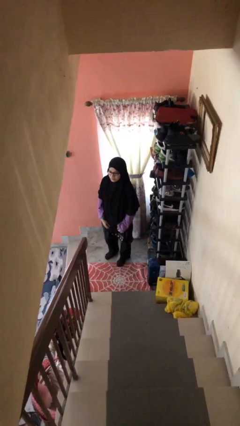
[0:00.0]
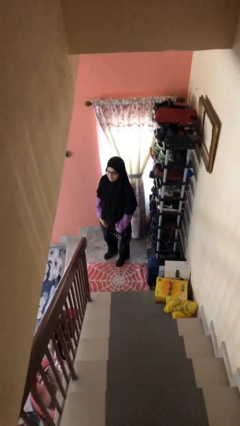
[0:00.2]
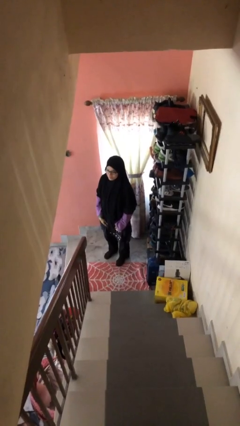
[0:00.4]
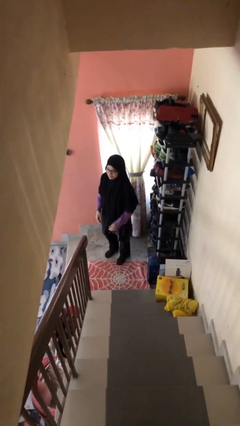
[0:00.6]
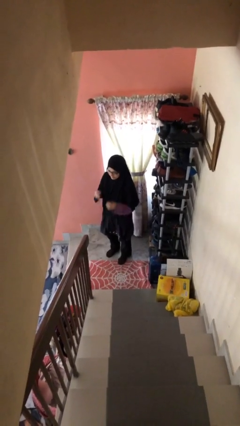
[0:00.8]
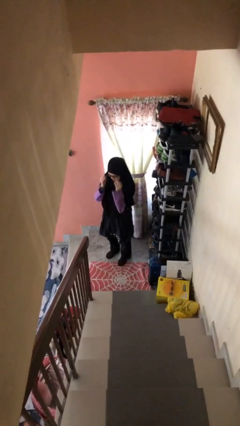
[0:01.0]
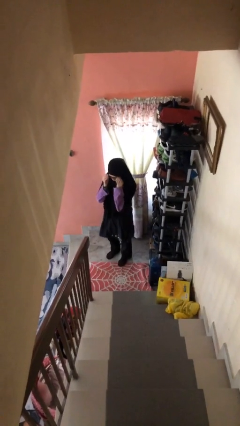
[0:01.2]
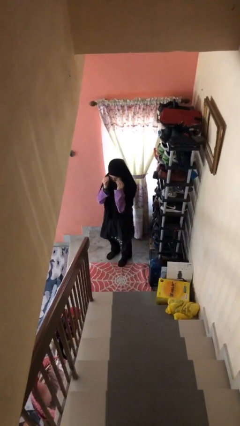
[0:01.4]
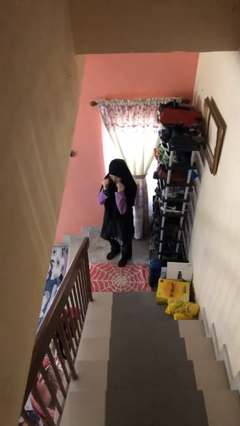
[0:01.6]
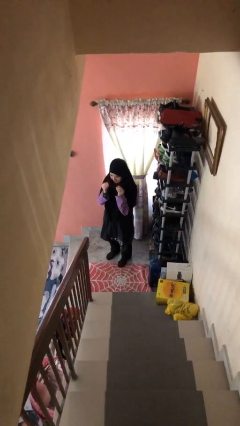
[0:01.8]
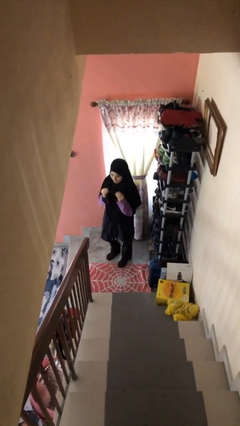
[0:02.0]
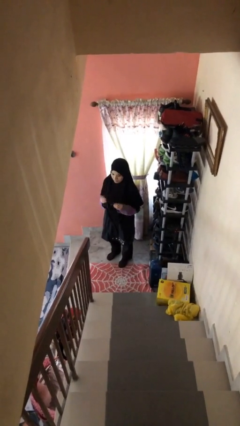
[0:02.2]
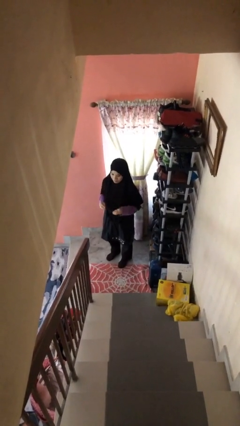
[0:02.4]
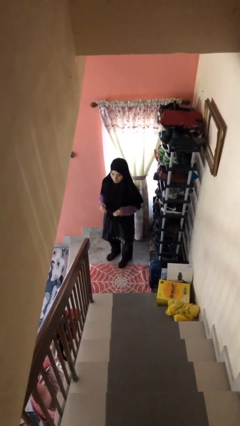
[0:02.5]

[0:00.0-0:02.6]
person takes off glasses

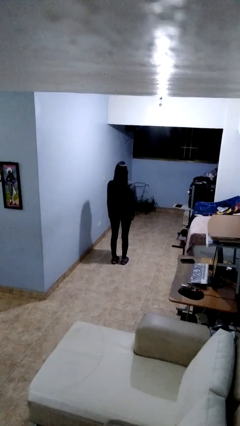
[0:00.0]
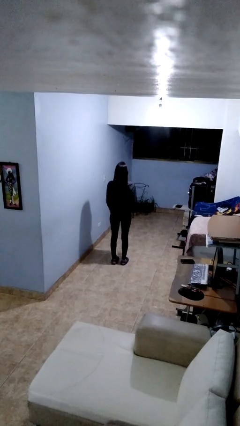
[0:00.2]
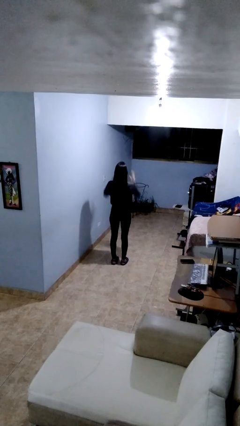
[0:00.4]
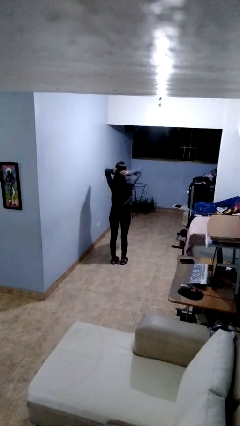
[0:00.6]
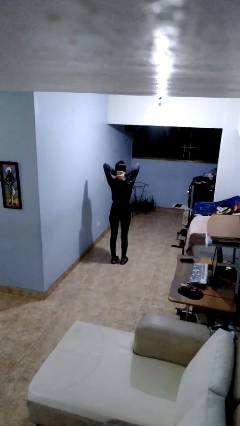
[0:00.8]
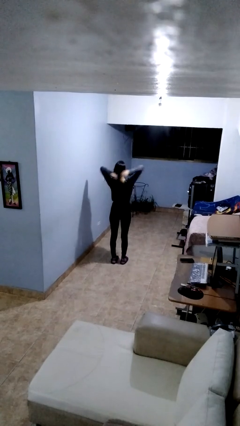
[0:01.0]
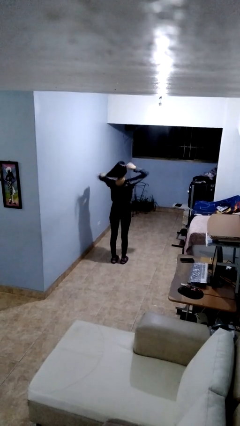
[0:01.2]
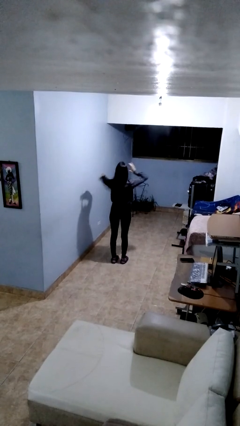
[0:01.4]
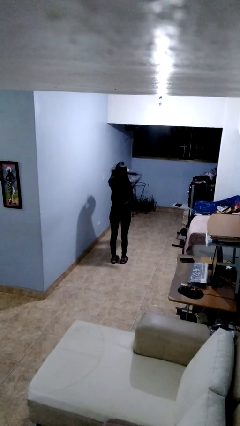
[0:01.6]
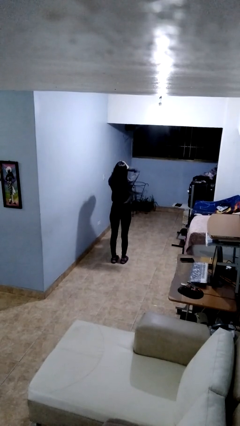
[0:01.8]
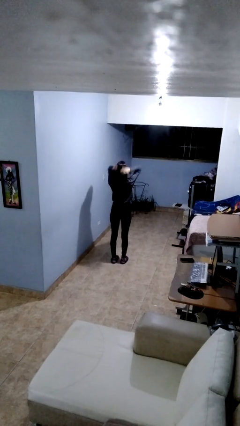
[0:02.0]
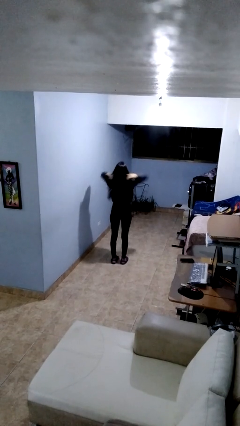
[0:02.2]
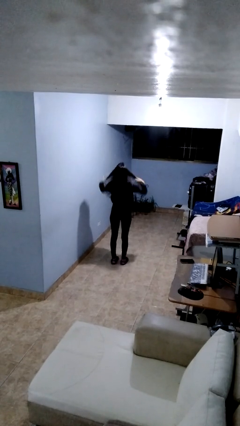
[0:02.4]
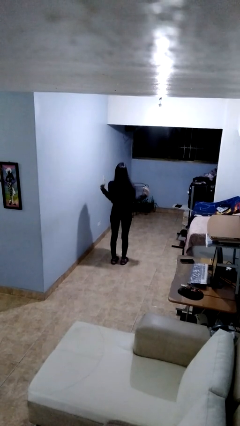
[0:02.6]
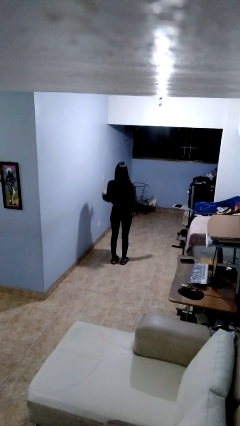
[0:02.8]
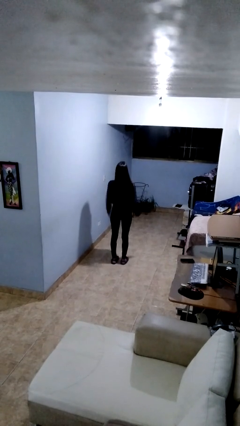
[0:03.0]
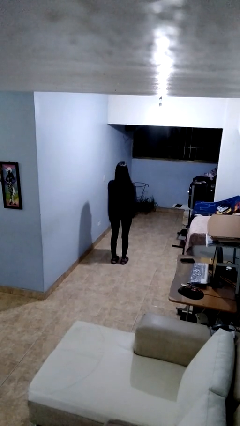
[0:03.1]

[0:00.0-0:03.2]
person strokes hair

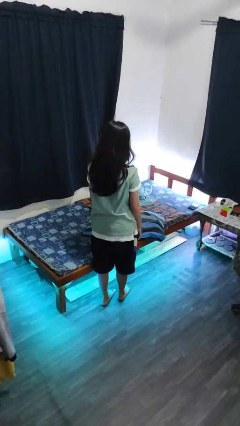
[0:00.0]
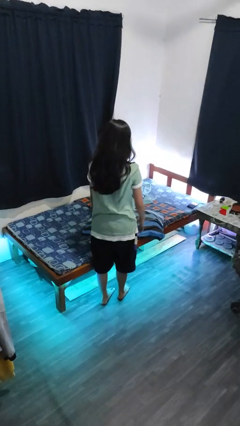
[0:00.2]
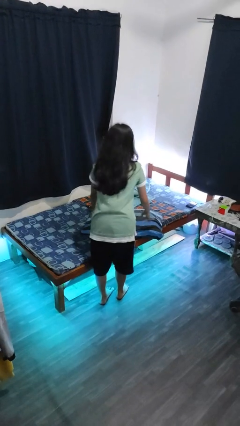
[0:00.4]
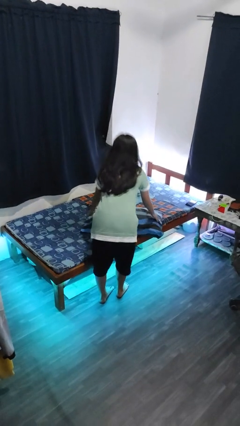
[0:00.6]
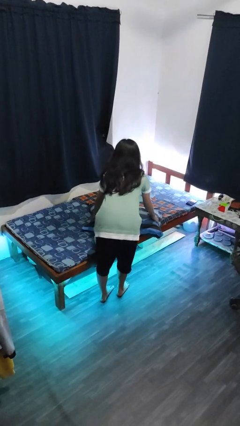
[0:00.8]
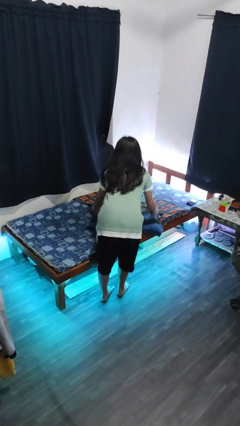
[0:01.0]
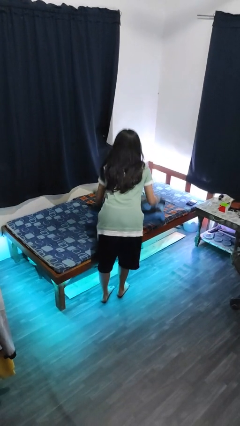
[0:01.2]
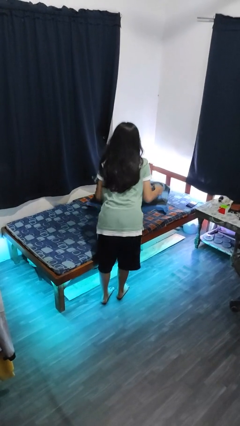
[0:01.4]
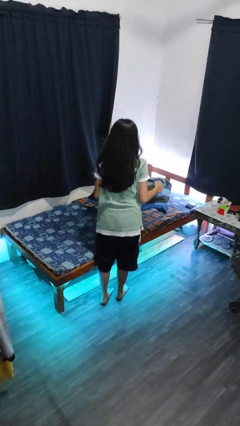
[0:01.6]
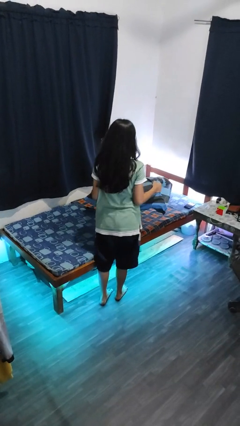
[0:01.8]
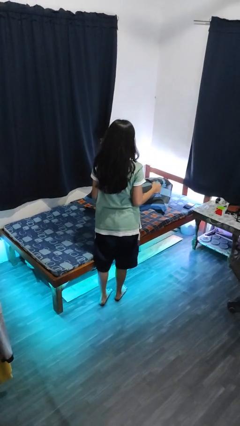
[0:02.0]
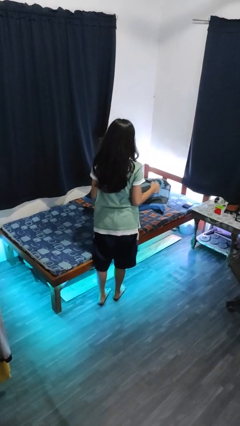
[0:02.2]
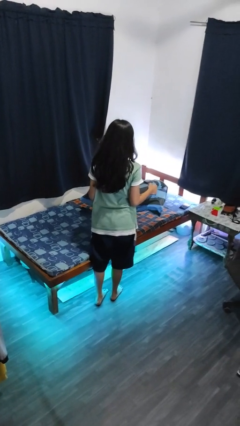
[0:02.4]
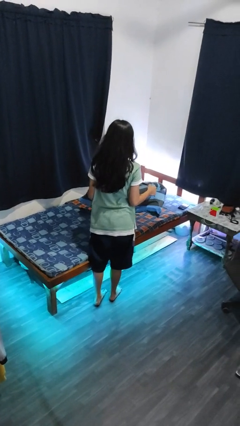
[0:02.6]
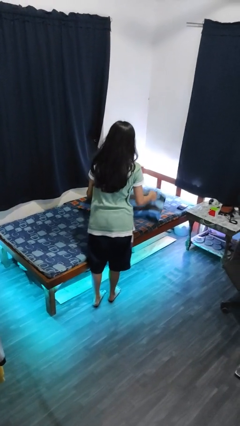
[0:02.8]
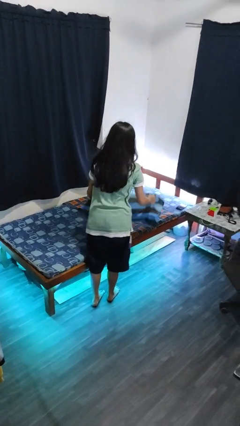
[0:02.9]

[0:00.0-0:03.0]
person picks up object from bed

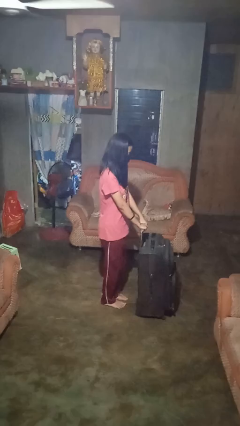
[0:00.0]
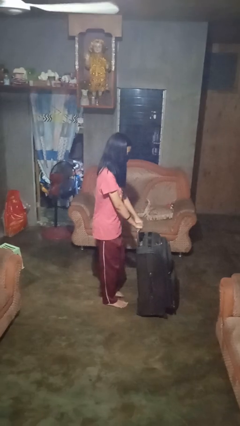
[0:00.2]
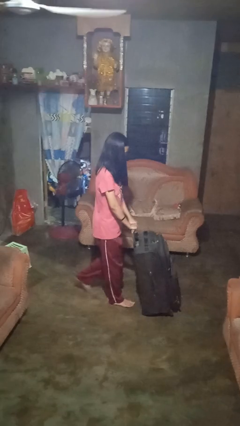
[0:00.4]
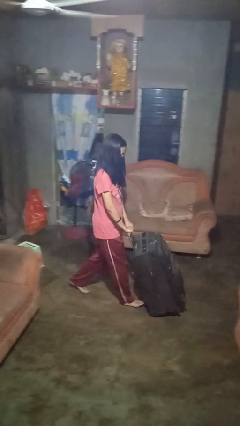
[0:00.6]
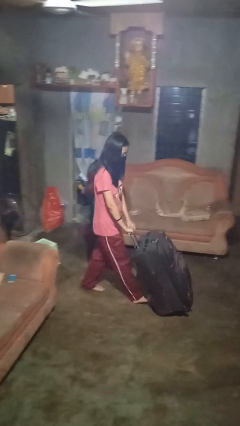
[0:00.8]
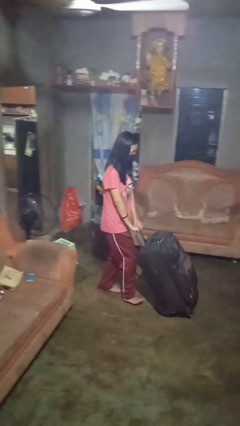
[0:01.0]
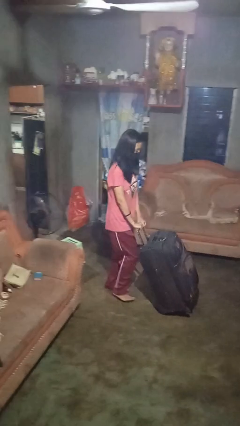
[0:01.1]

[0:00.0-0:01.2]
person pulls wheeled cart

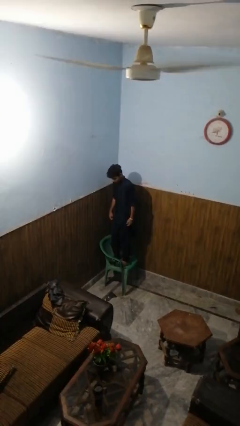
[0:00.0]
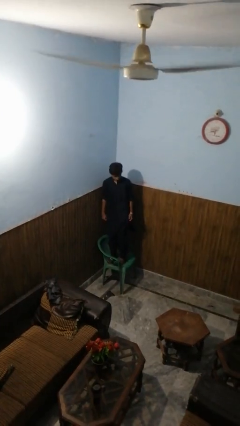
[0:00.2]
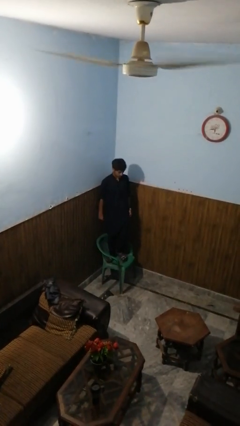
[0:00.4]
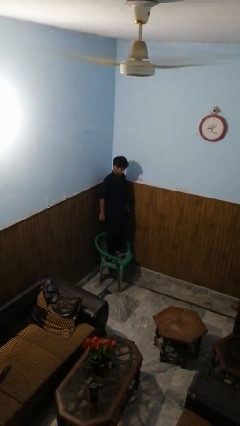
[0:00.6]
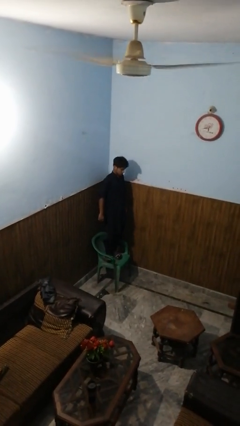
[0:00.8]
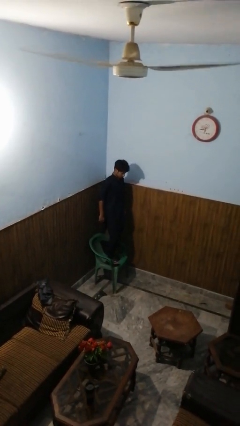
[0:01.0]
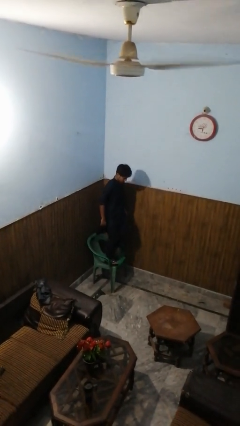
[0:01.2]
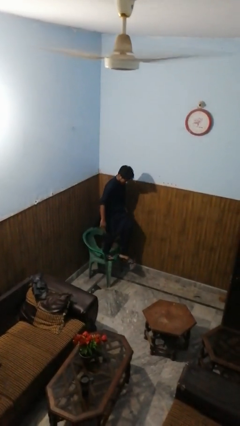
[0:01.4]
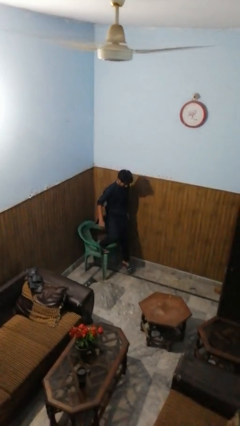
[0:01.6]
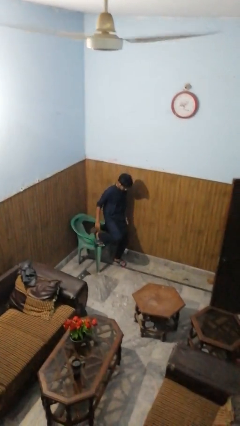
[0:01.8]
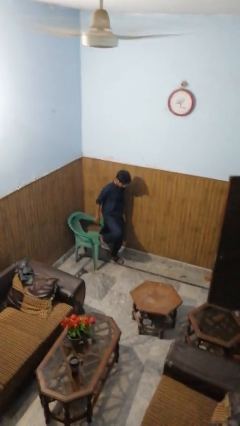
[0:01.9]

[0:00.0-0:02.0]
person climbs off chair

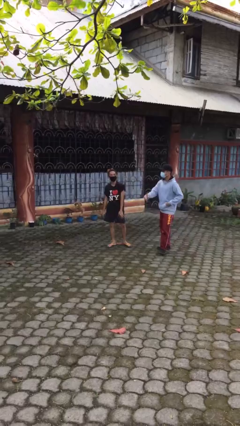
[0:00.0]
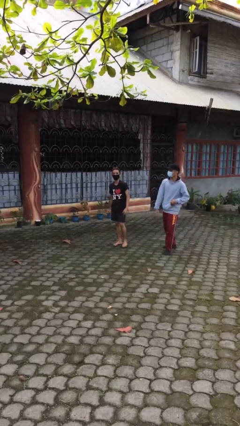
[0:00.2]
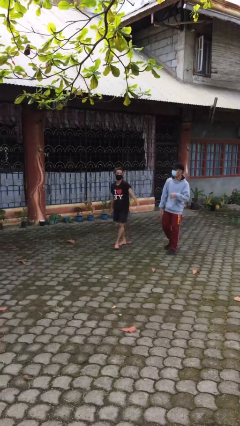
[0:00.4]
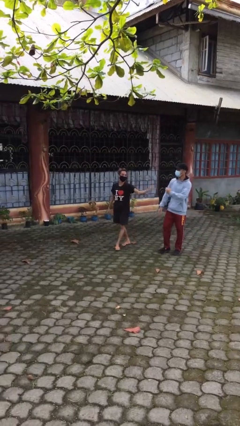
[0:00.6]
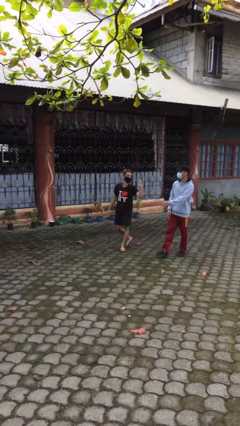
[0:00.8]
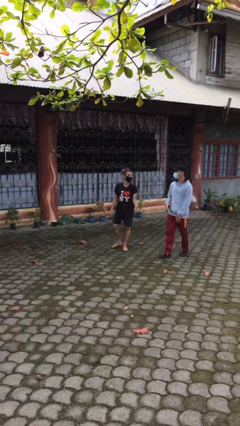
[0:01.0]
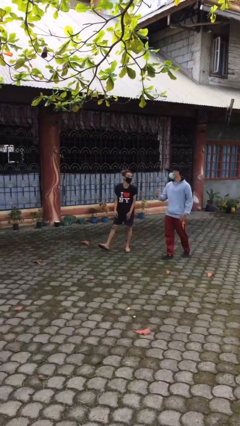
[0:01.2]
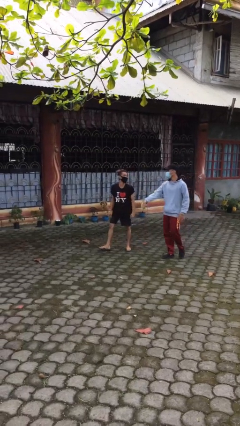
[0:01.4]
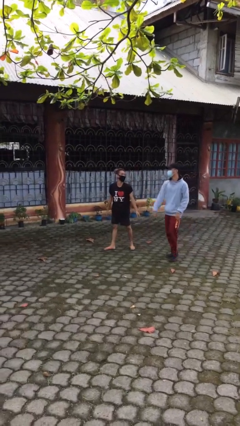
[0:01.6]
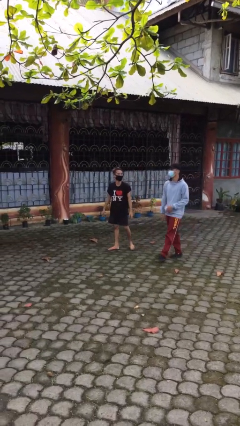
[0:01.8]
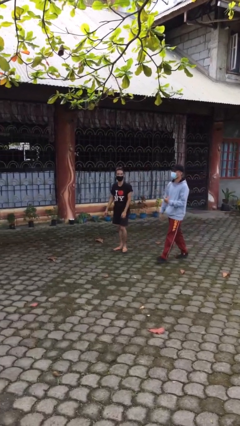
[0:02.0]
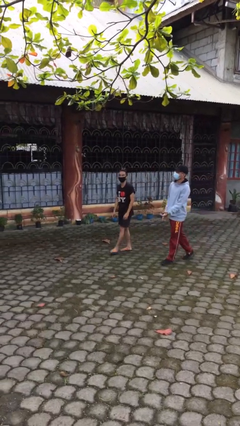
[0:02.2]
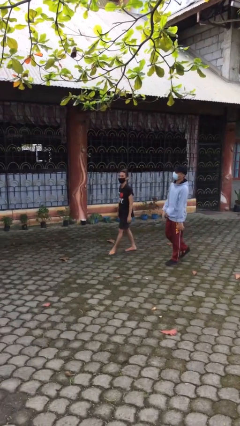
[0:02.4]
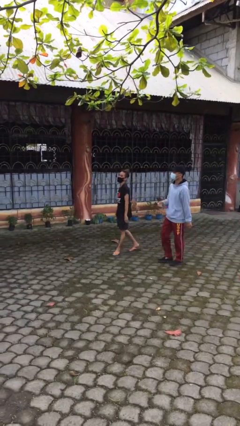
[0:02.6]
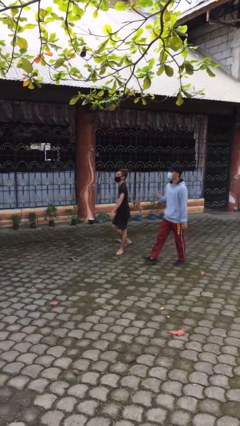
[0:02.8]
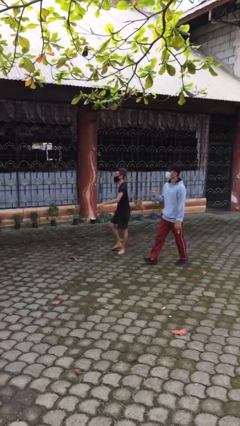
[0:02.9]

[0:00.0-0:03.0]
person talks to person

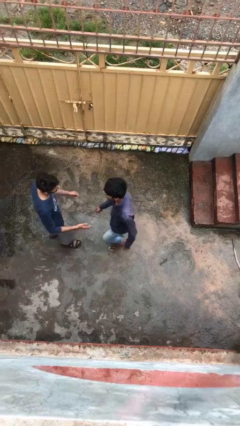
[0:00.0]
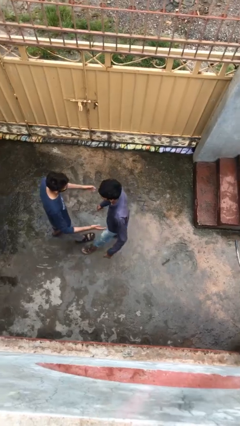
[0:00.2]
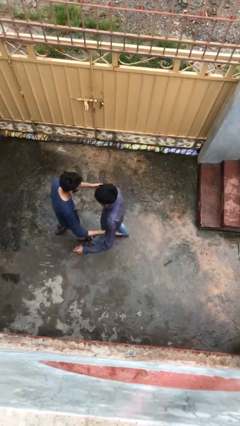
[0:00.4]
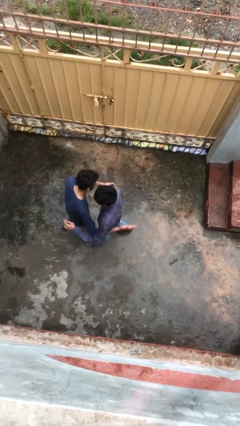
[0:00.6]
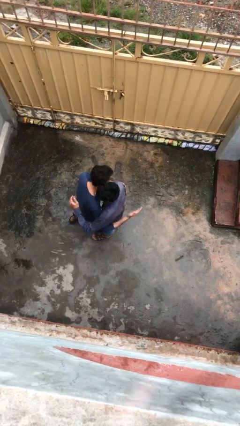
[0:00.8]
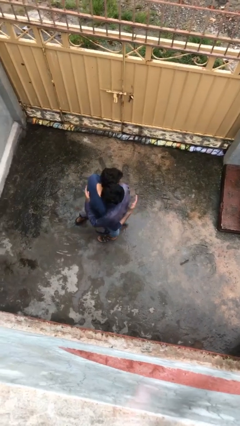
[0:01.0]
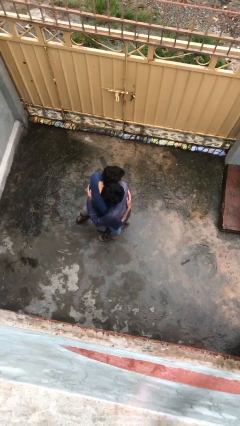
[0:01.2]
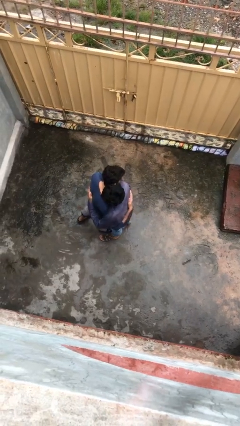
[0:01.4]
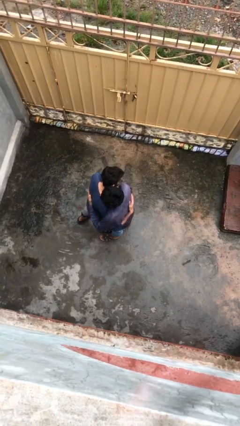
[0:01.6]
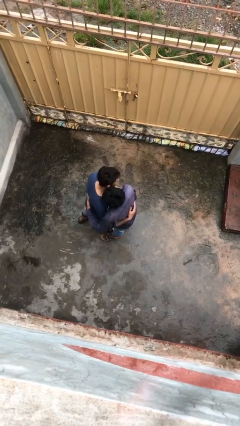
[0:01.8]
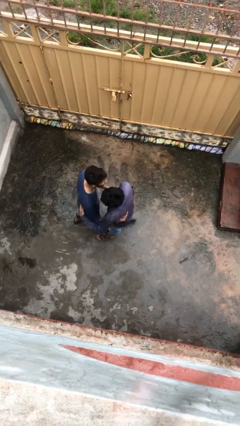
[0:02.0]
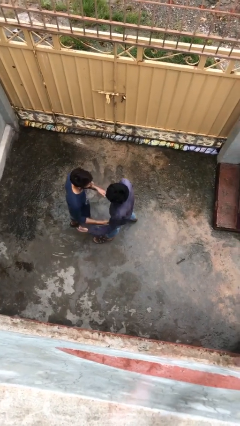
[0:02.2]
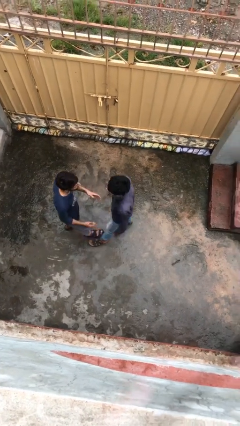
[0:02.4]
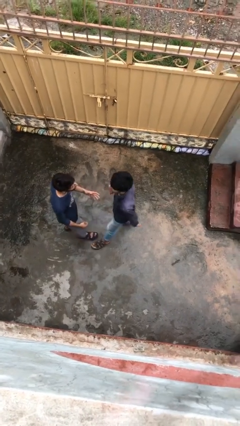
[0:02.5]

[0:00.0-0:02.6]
person embraces person
